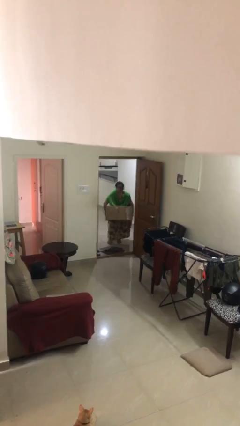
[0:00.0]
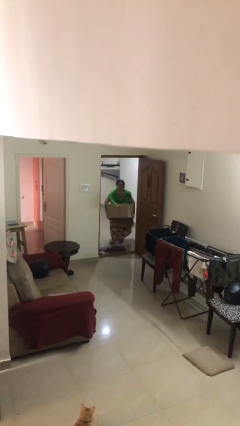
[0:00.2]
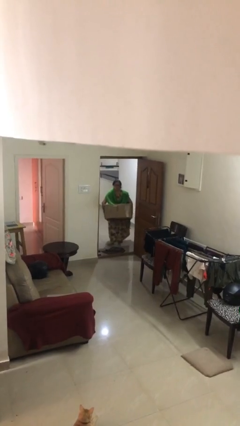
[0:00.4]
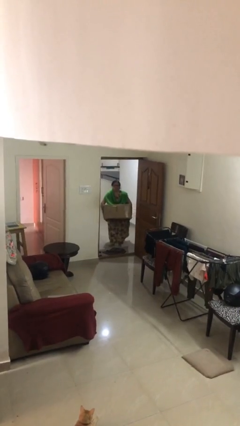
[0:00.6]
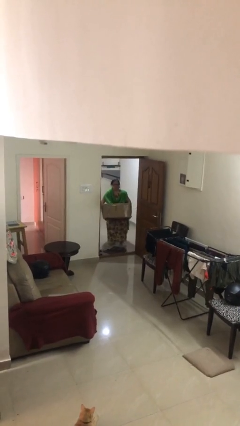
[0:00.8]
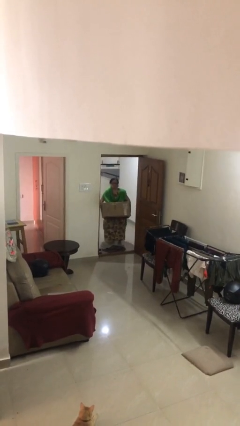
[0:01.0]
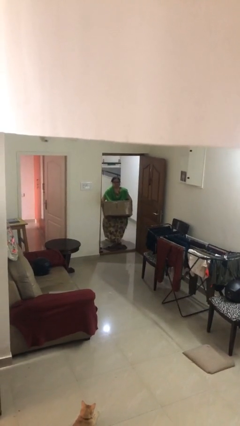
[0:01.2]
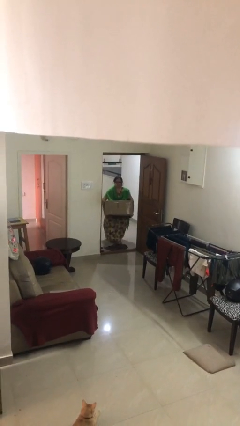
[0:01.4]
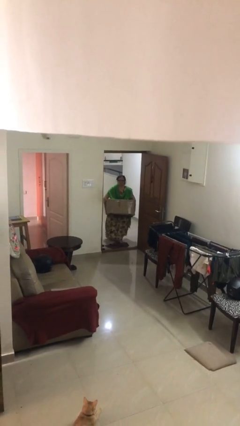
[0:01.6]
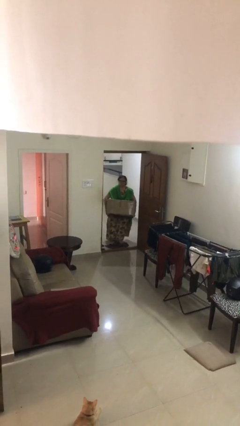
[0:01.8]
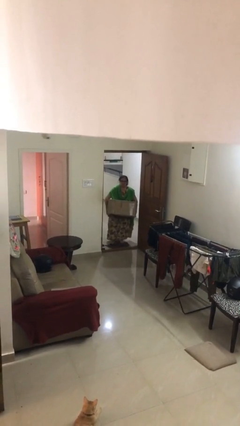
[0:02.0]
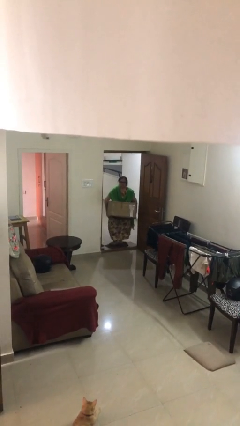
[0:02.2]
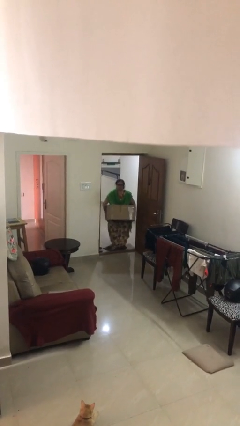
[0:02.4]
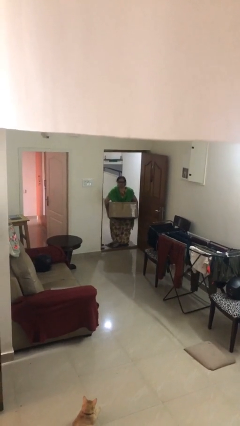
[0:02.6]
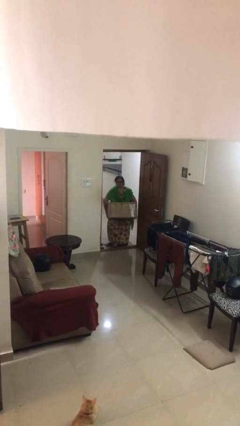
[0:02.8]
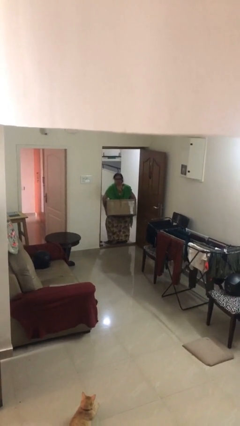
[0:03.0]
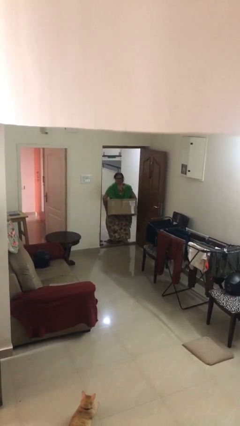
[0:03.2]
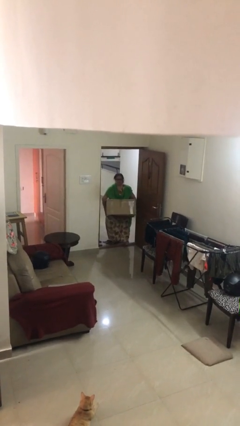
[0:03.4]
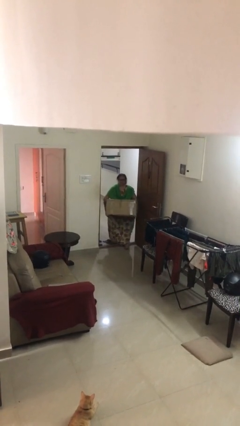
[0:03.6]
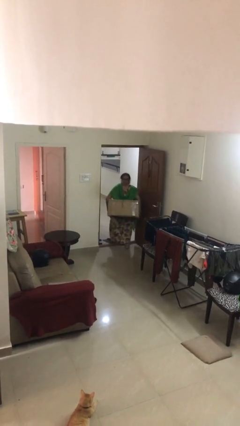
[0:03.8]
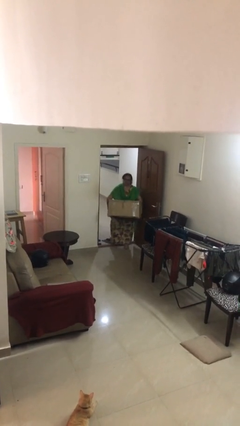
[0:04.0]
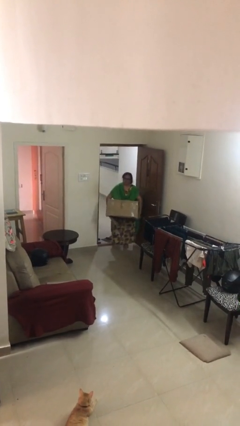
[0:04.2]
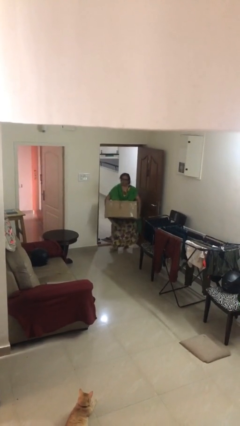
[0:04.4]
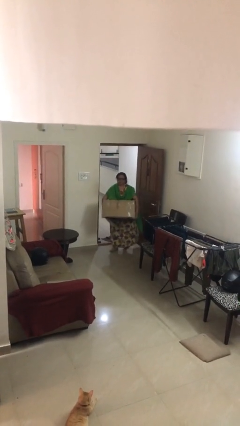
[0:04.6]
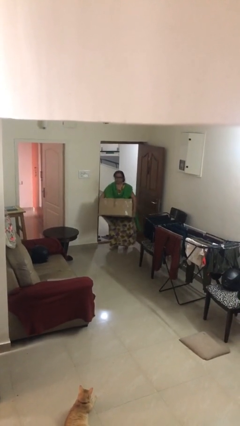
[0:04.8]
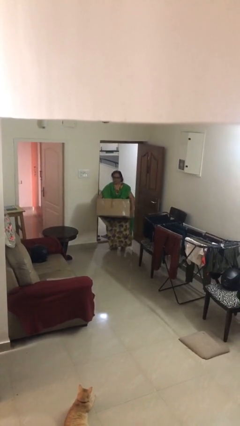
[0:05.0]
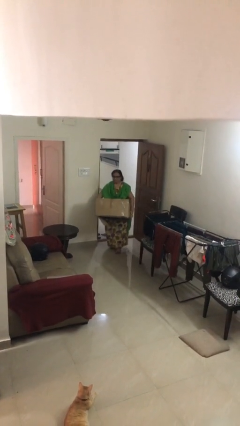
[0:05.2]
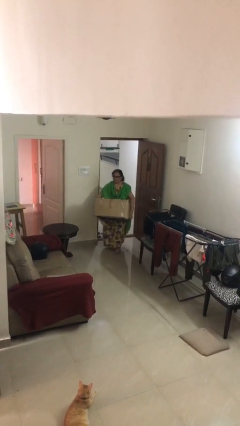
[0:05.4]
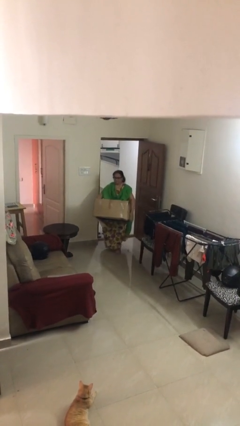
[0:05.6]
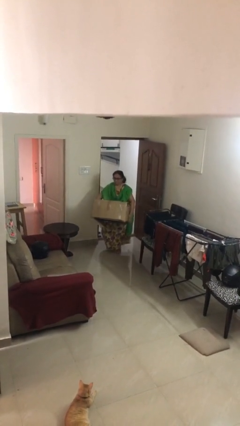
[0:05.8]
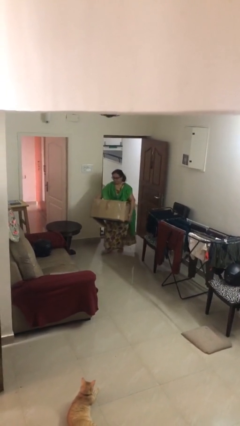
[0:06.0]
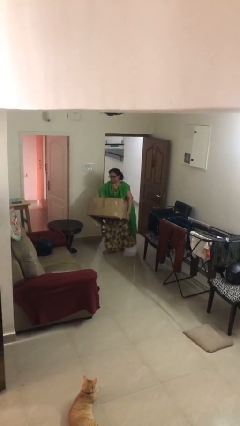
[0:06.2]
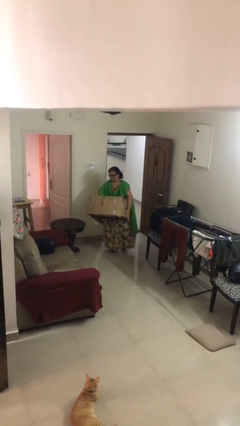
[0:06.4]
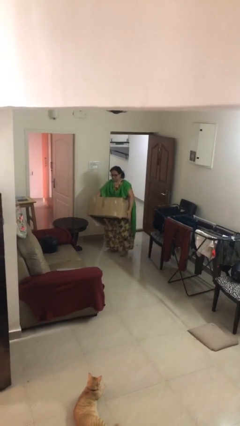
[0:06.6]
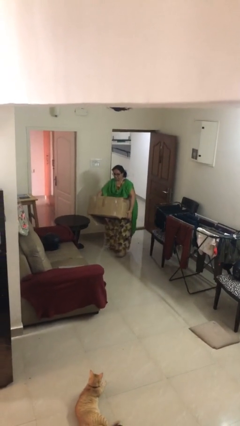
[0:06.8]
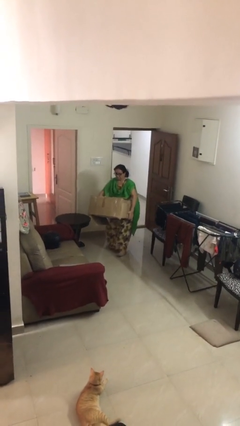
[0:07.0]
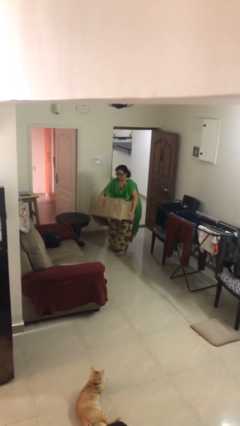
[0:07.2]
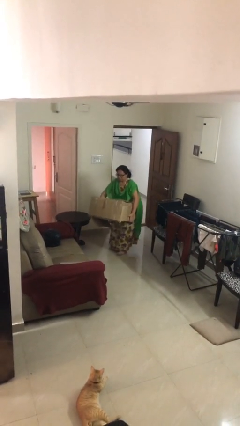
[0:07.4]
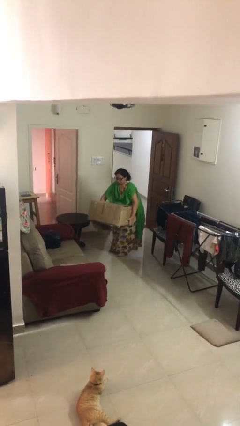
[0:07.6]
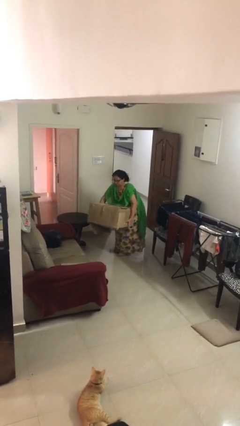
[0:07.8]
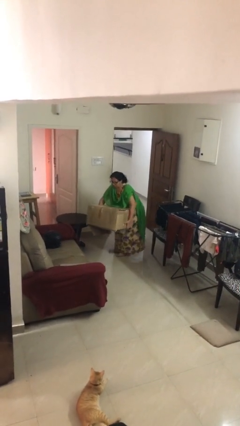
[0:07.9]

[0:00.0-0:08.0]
person carries heavy object

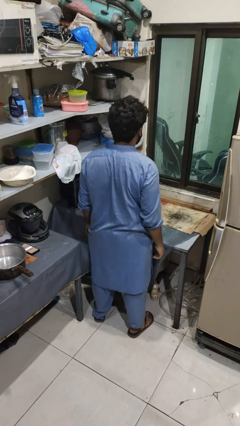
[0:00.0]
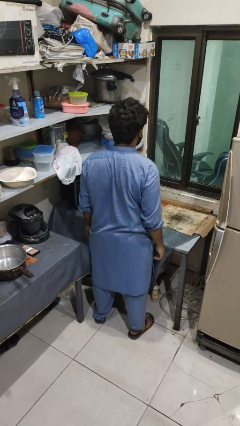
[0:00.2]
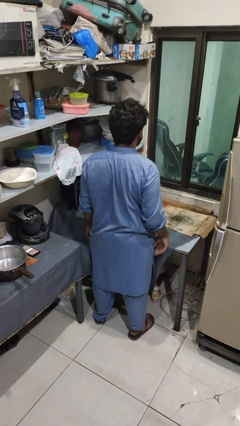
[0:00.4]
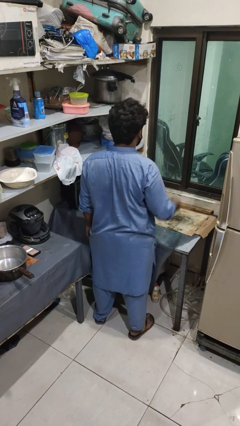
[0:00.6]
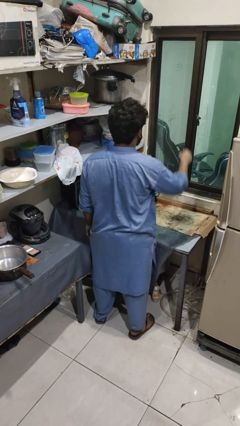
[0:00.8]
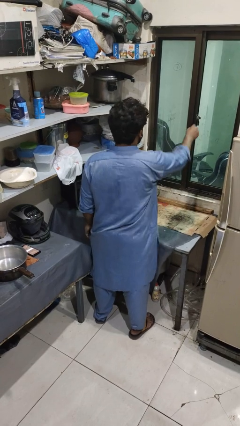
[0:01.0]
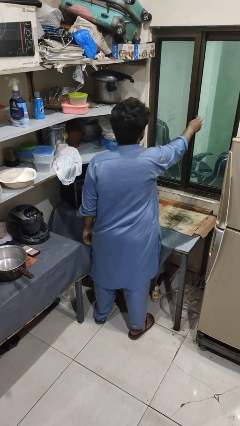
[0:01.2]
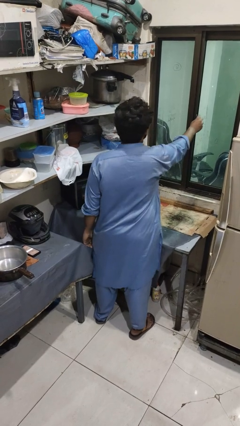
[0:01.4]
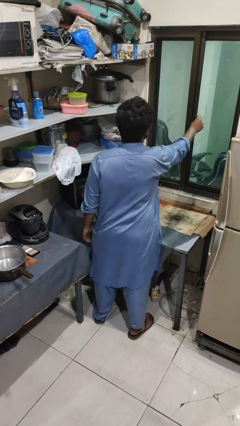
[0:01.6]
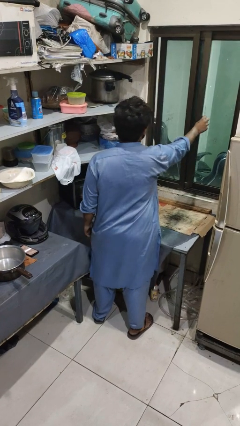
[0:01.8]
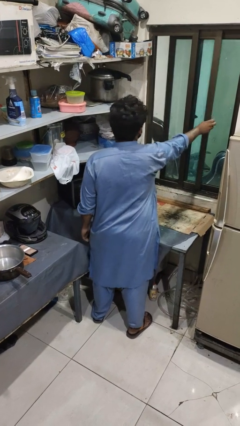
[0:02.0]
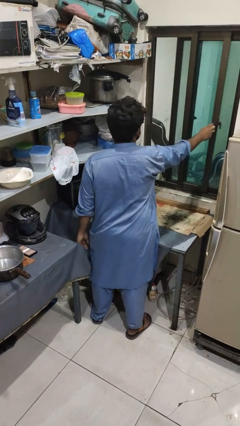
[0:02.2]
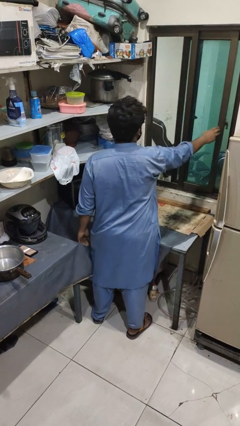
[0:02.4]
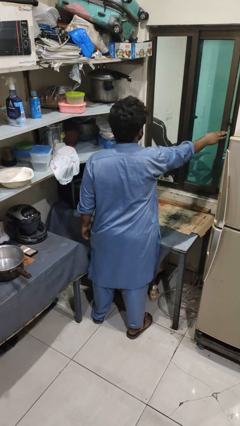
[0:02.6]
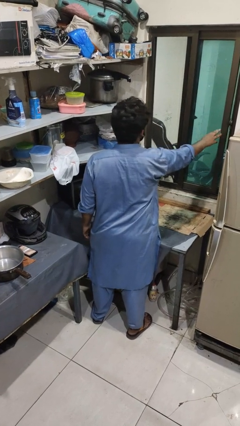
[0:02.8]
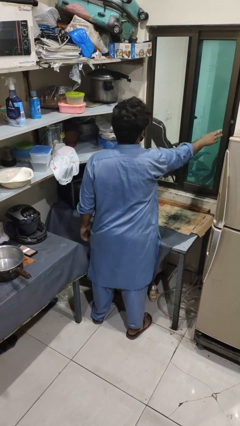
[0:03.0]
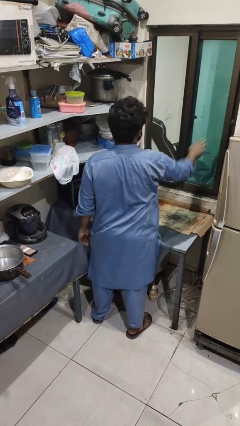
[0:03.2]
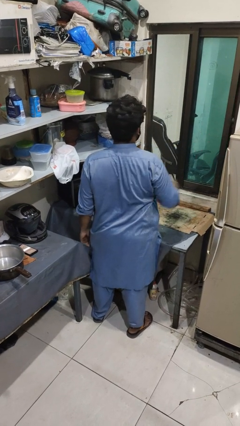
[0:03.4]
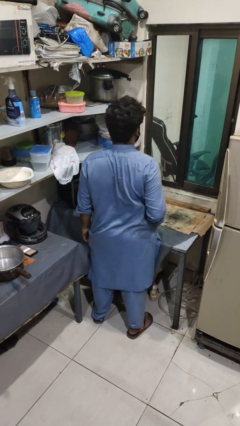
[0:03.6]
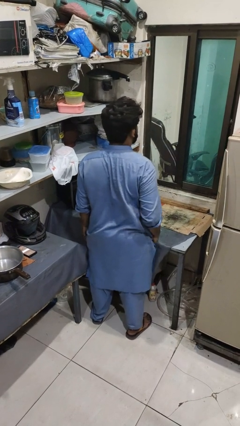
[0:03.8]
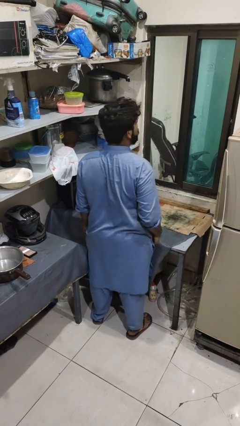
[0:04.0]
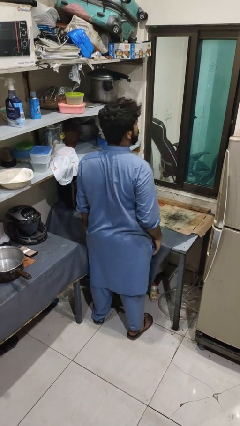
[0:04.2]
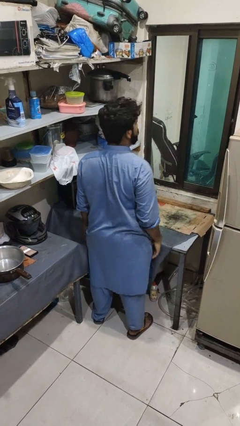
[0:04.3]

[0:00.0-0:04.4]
person opens home window

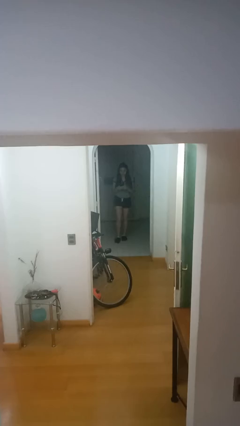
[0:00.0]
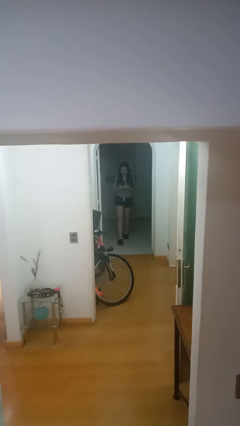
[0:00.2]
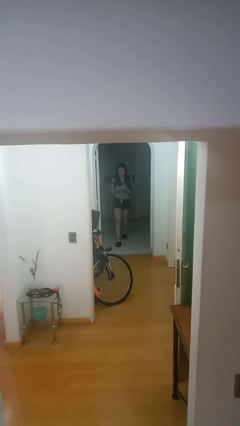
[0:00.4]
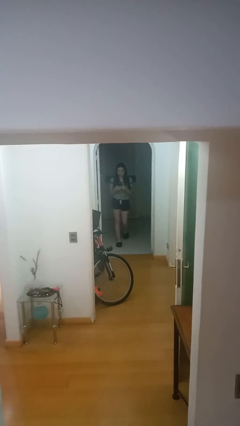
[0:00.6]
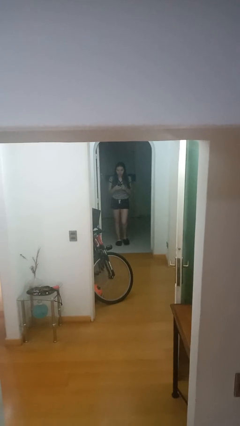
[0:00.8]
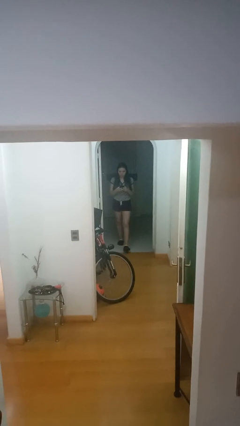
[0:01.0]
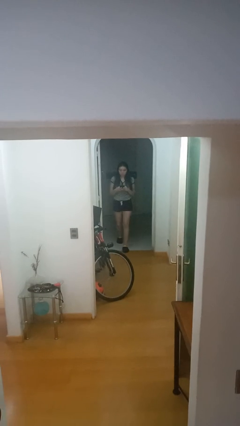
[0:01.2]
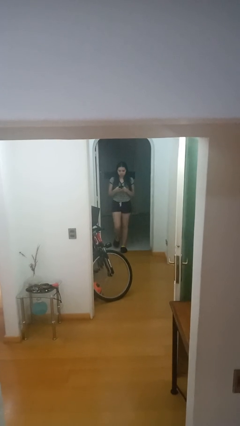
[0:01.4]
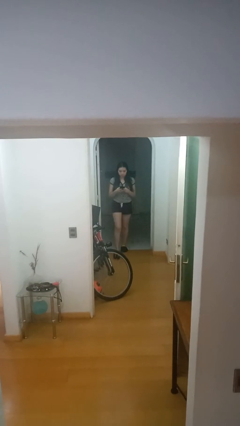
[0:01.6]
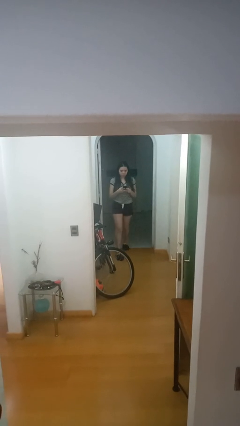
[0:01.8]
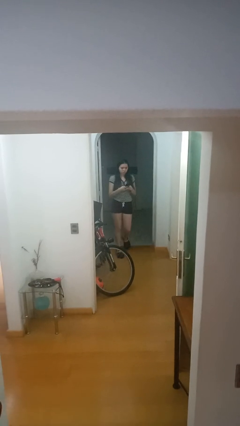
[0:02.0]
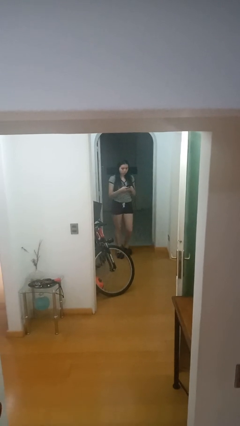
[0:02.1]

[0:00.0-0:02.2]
person enters scene through structure

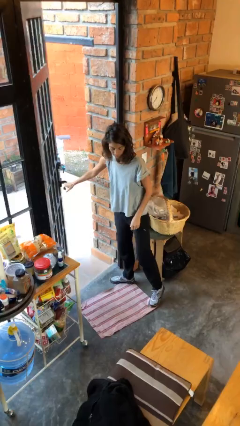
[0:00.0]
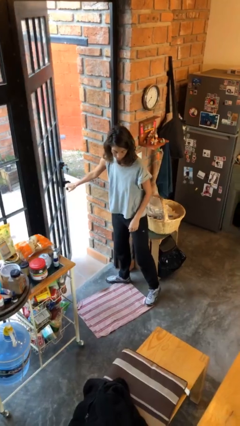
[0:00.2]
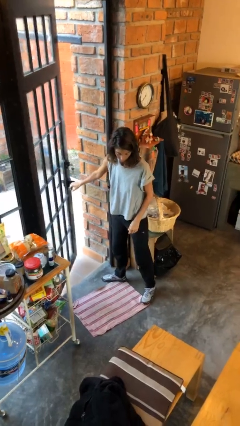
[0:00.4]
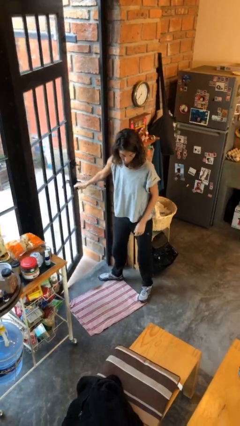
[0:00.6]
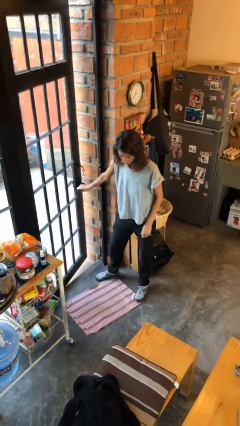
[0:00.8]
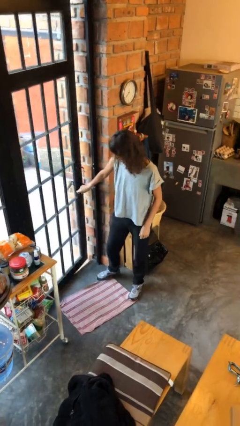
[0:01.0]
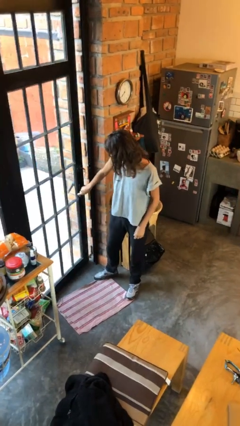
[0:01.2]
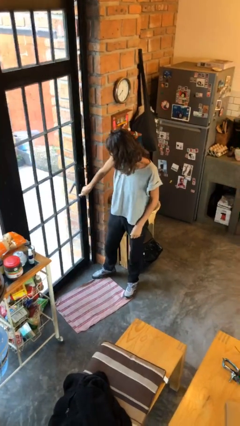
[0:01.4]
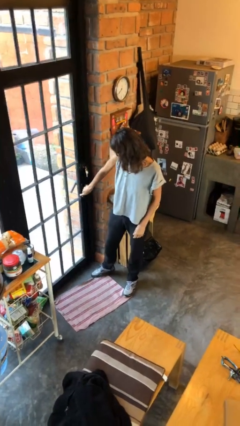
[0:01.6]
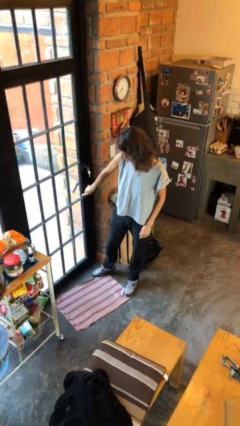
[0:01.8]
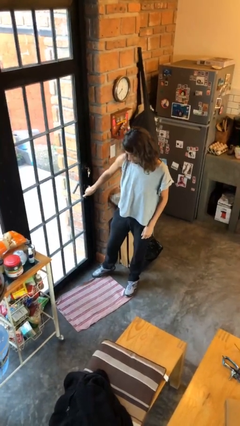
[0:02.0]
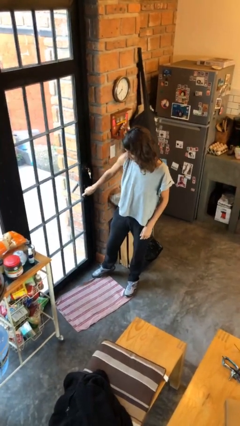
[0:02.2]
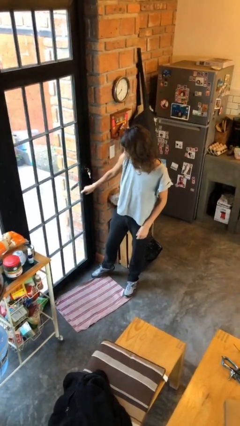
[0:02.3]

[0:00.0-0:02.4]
person closes facility door

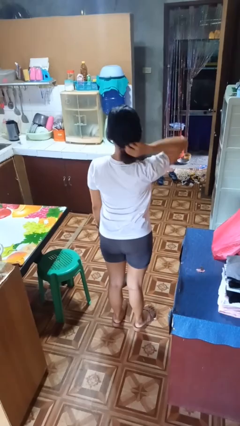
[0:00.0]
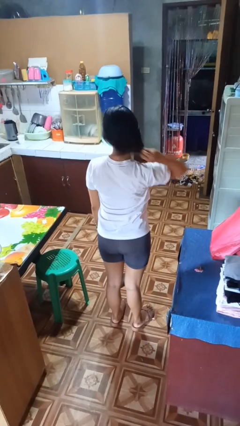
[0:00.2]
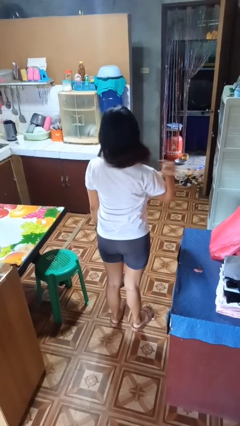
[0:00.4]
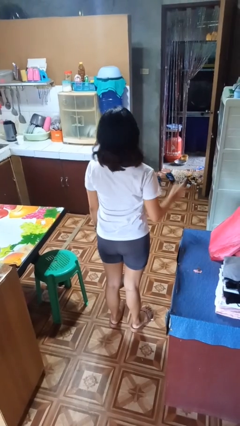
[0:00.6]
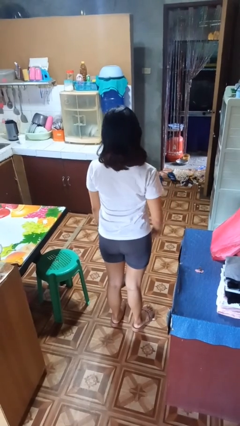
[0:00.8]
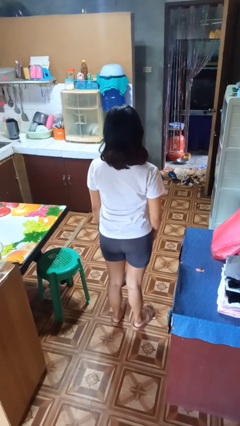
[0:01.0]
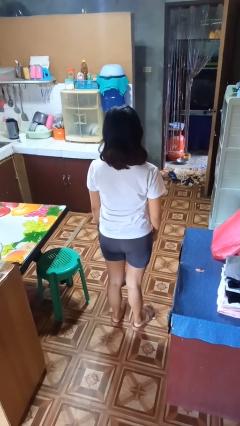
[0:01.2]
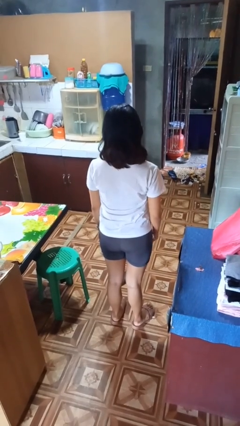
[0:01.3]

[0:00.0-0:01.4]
person takes off hairtie
